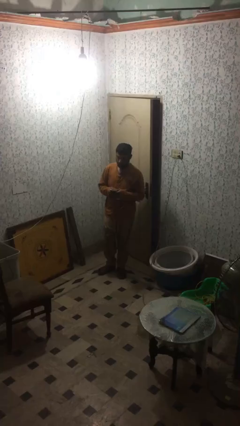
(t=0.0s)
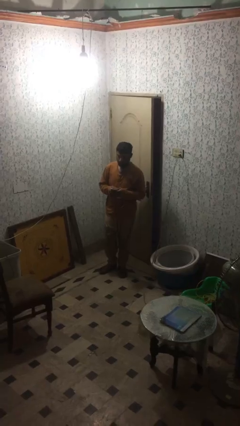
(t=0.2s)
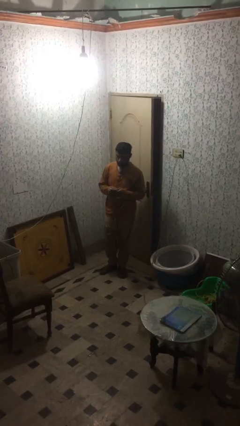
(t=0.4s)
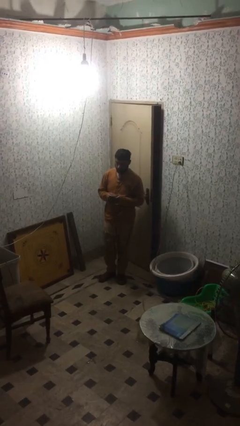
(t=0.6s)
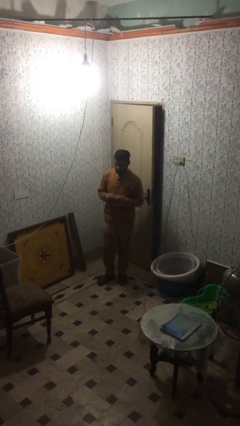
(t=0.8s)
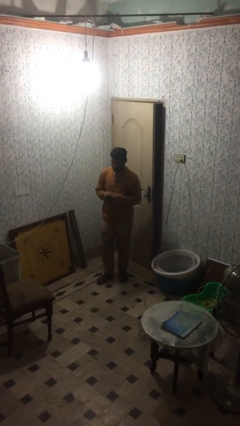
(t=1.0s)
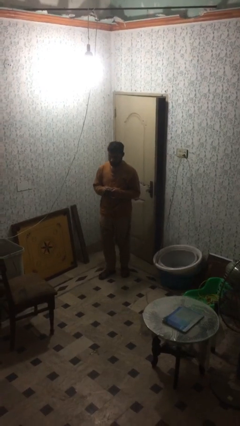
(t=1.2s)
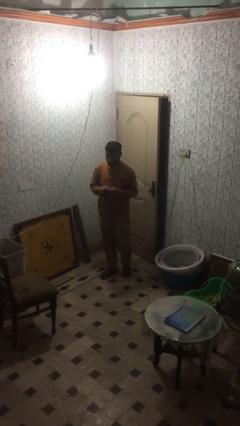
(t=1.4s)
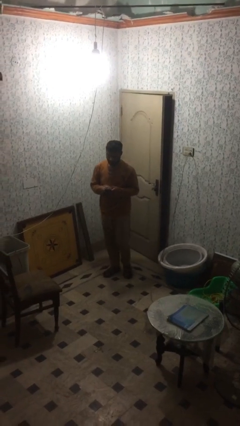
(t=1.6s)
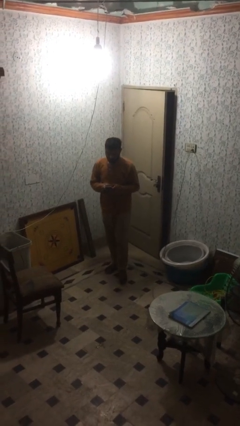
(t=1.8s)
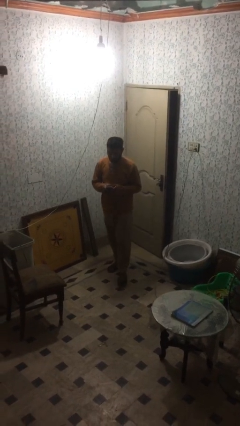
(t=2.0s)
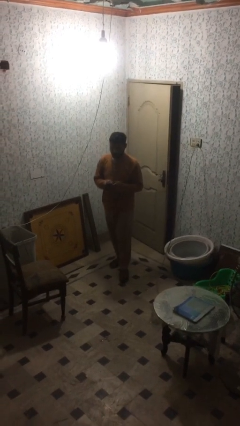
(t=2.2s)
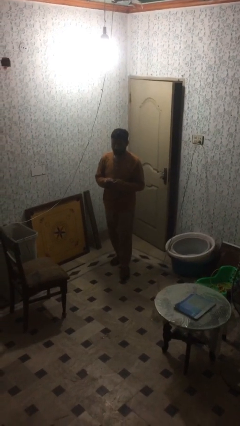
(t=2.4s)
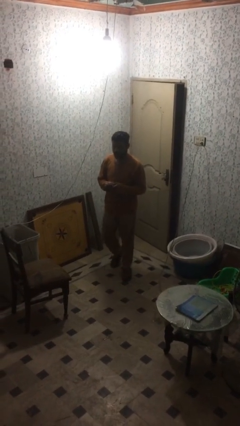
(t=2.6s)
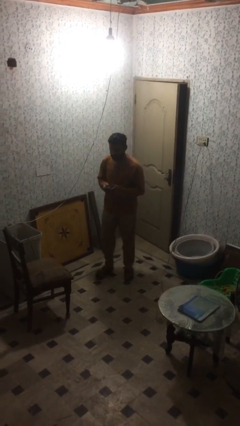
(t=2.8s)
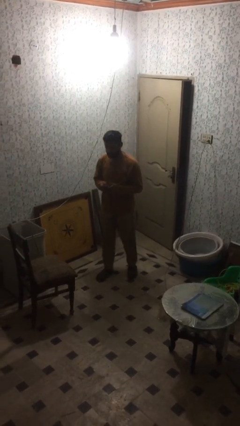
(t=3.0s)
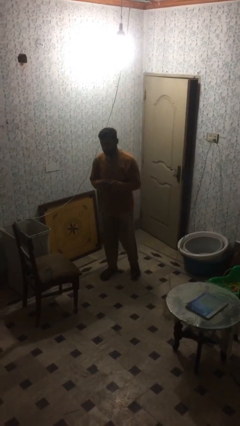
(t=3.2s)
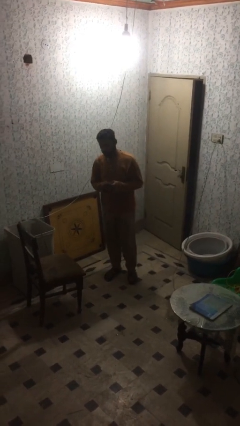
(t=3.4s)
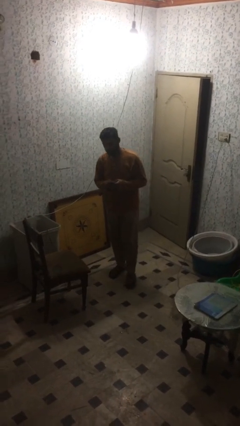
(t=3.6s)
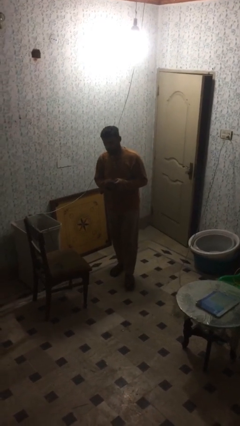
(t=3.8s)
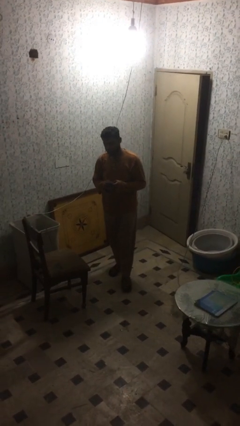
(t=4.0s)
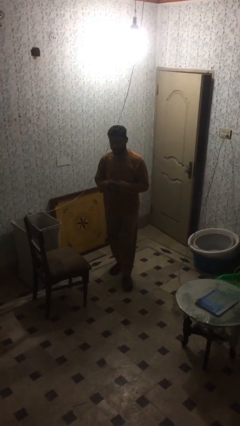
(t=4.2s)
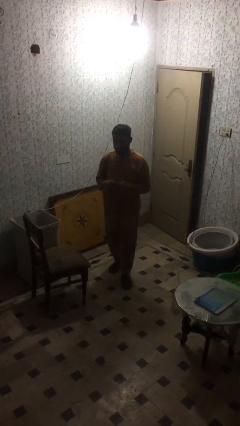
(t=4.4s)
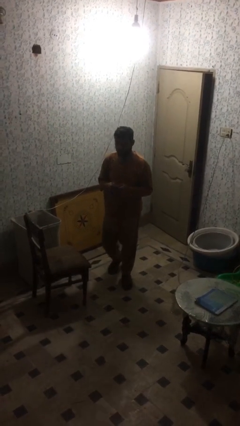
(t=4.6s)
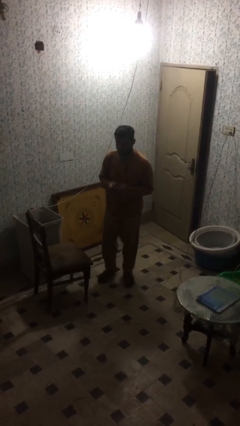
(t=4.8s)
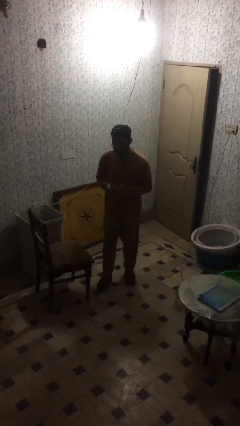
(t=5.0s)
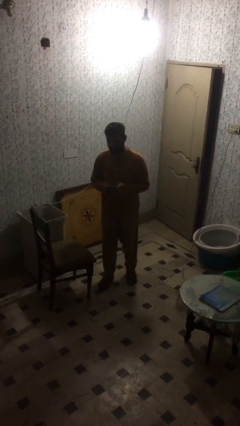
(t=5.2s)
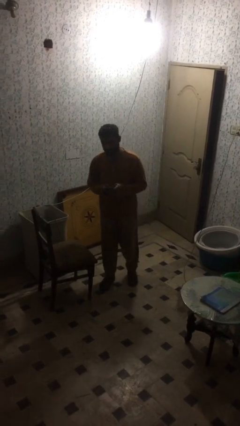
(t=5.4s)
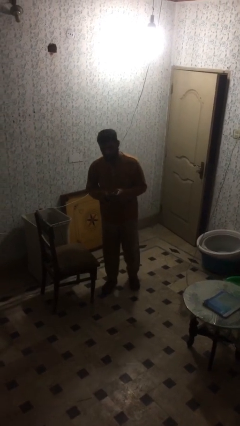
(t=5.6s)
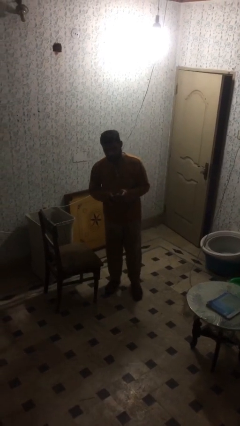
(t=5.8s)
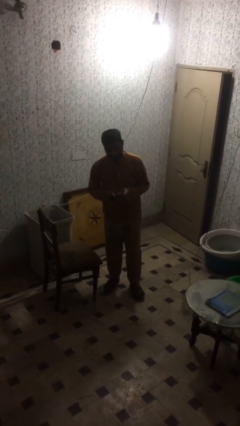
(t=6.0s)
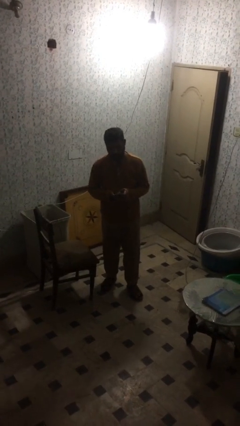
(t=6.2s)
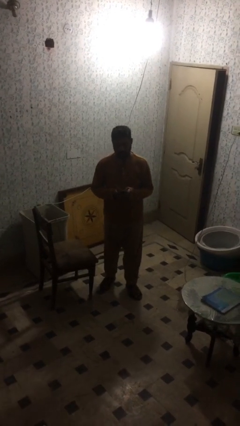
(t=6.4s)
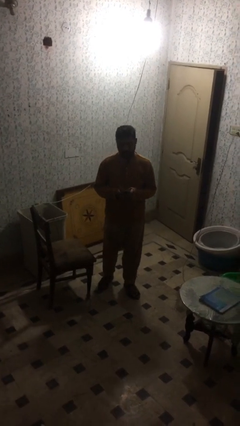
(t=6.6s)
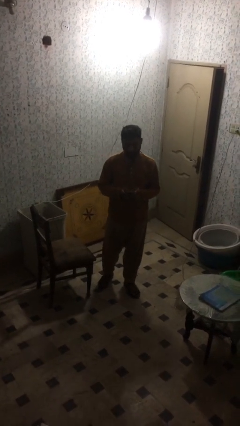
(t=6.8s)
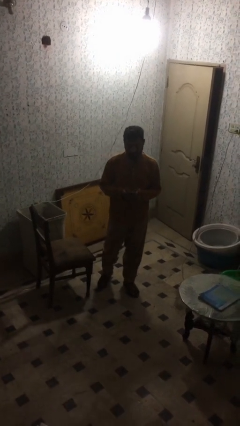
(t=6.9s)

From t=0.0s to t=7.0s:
person texts on phone

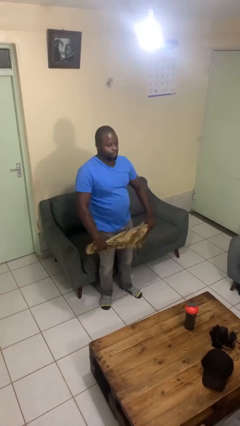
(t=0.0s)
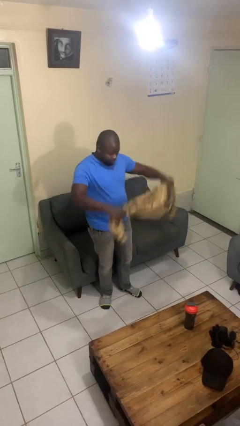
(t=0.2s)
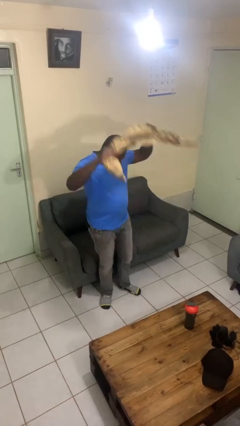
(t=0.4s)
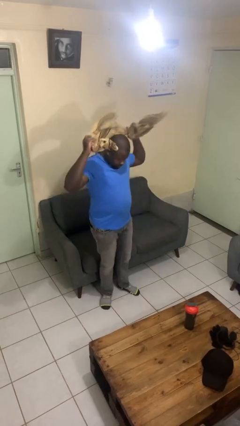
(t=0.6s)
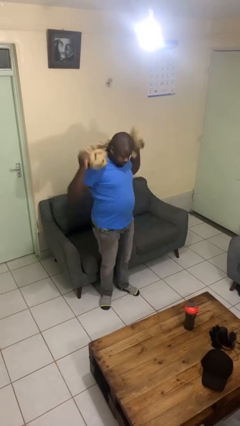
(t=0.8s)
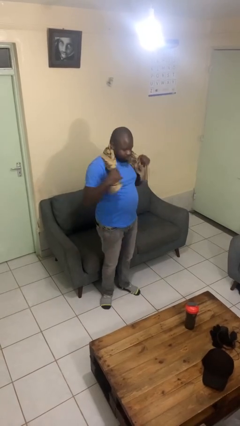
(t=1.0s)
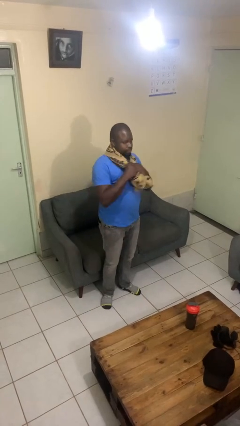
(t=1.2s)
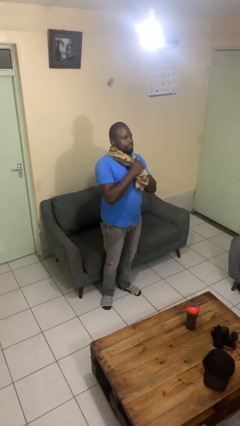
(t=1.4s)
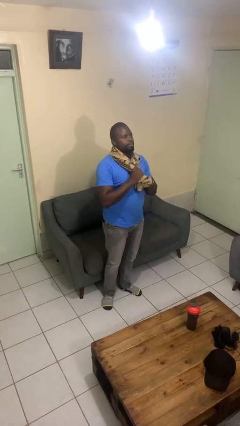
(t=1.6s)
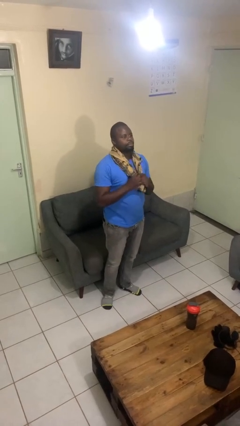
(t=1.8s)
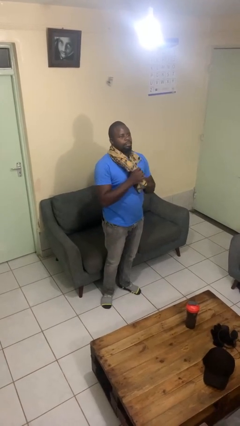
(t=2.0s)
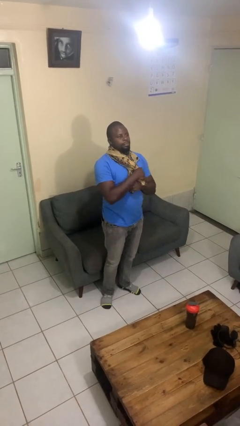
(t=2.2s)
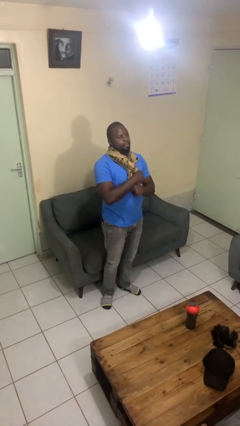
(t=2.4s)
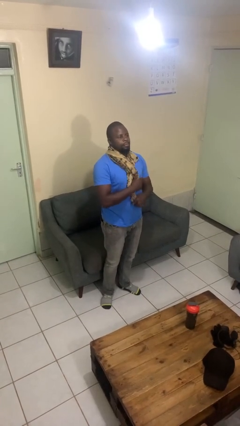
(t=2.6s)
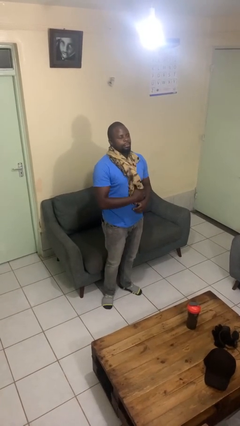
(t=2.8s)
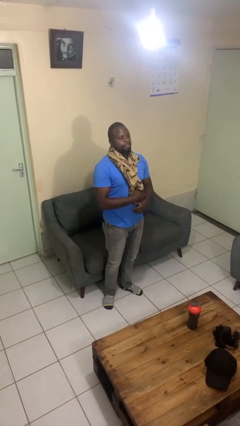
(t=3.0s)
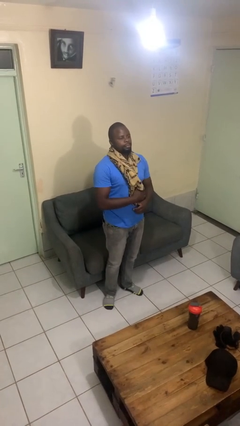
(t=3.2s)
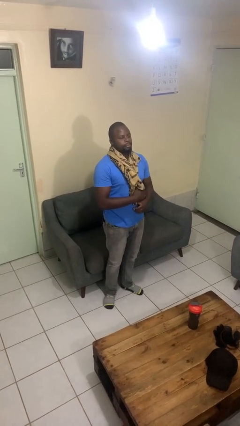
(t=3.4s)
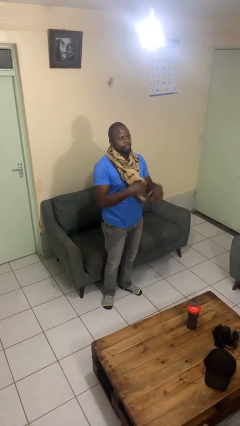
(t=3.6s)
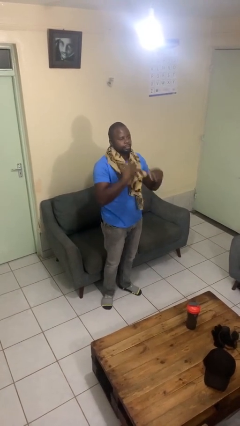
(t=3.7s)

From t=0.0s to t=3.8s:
person puts on scarf

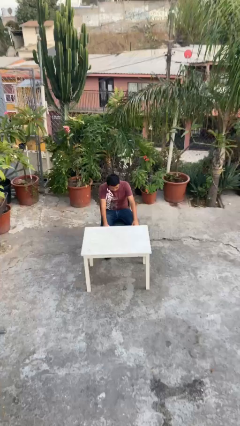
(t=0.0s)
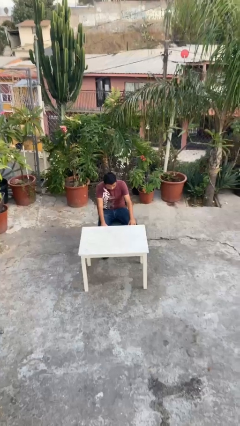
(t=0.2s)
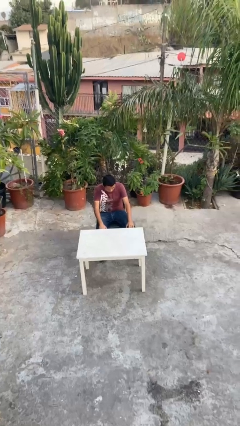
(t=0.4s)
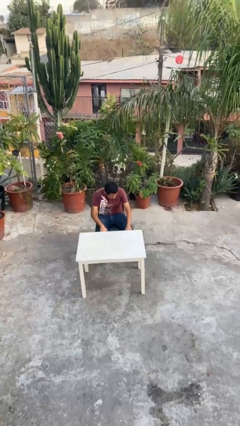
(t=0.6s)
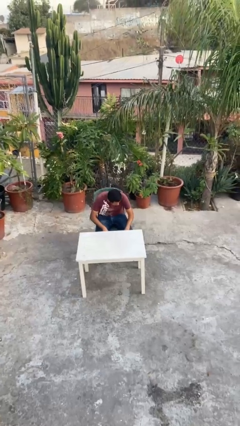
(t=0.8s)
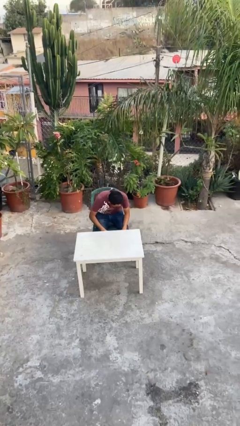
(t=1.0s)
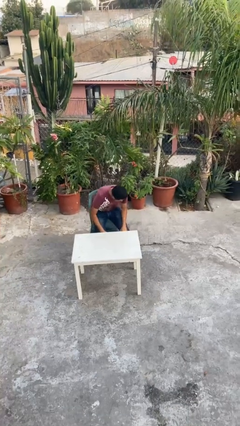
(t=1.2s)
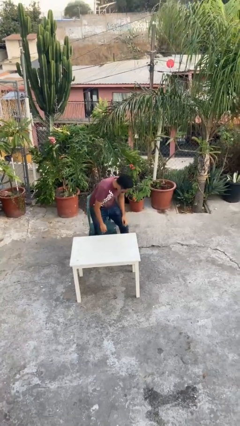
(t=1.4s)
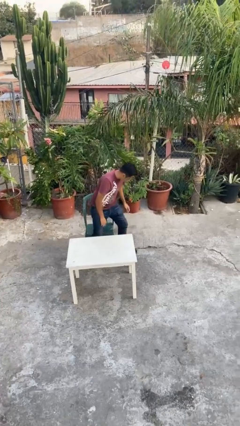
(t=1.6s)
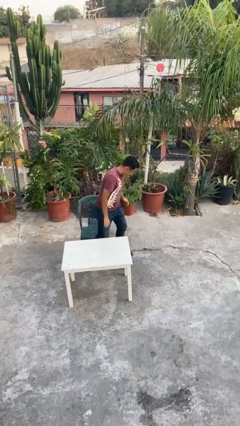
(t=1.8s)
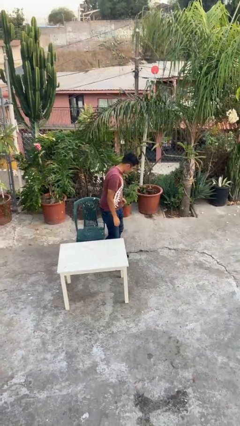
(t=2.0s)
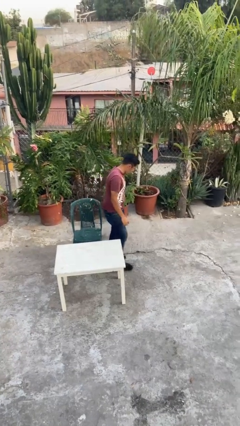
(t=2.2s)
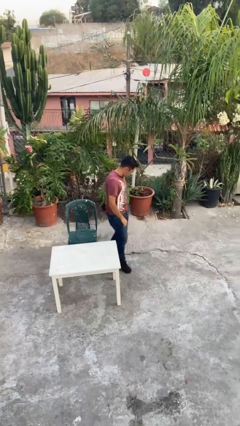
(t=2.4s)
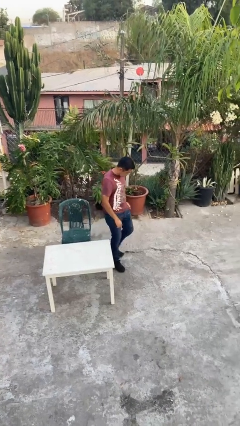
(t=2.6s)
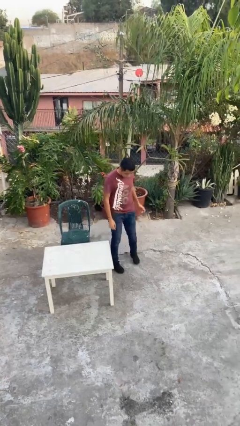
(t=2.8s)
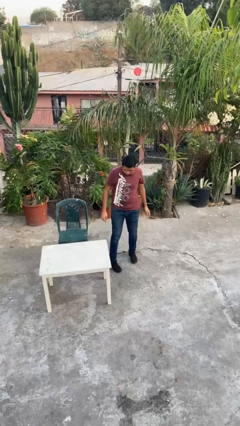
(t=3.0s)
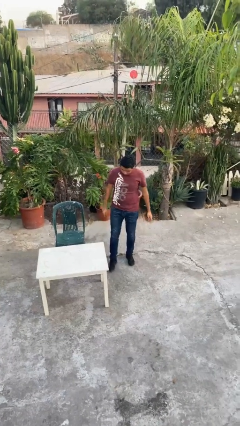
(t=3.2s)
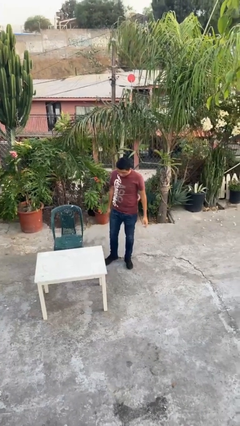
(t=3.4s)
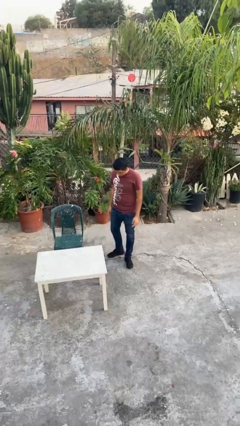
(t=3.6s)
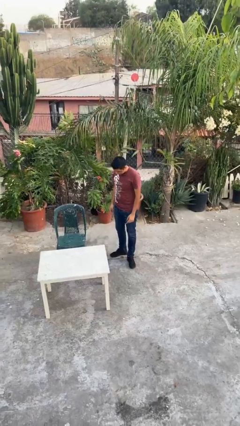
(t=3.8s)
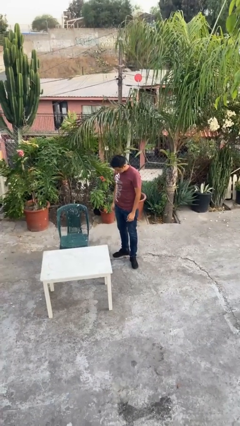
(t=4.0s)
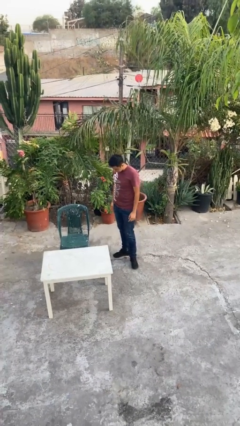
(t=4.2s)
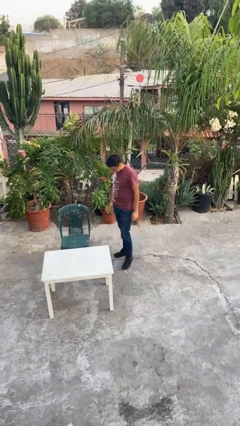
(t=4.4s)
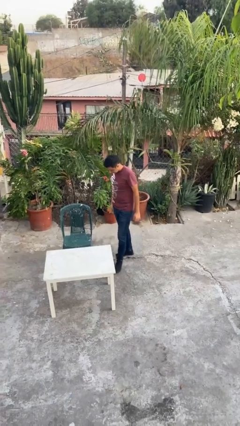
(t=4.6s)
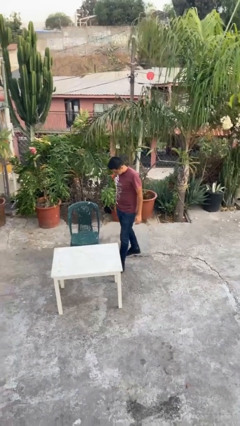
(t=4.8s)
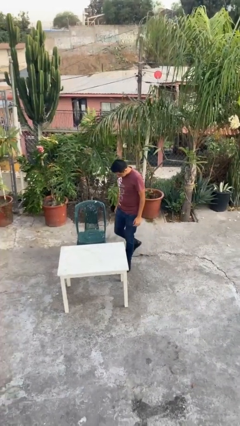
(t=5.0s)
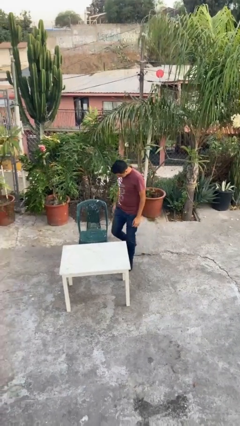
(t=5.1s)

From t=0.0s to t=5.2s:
person stands up

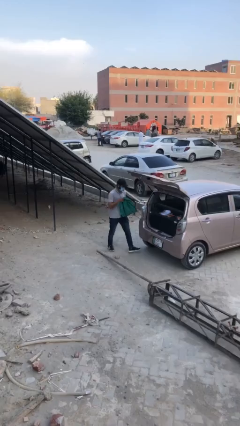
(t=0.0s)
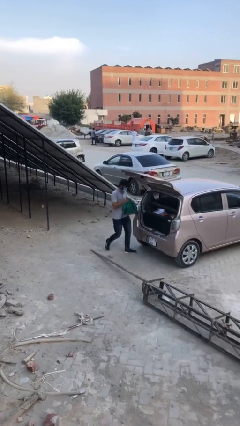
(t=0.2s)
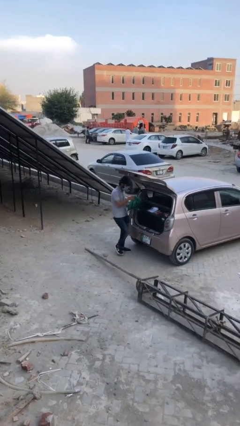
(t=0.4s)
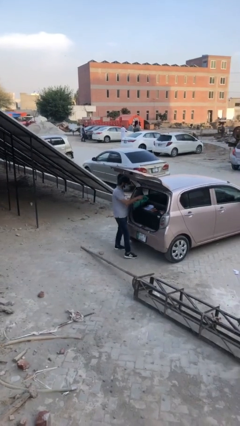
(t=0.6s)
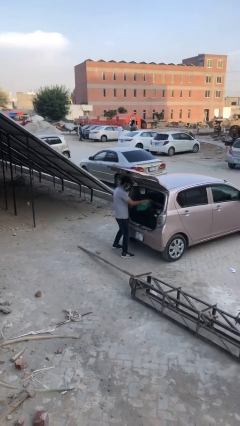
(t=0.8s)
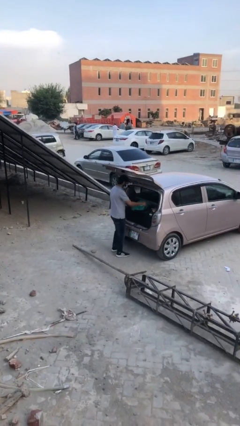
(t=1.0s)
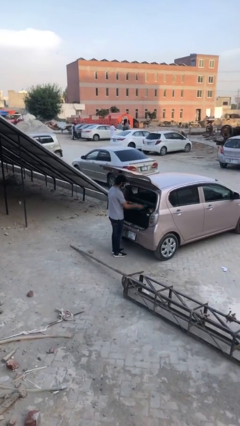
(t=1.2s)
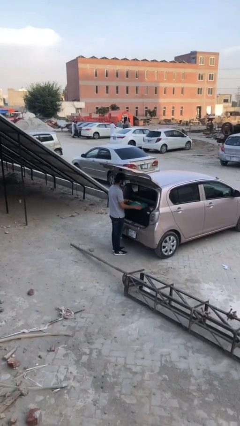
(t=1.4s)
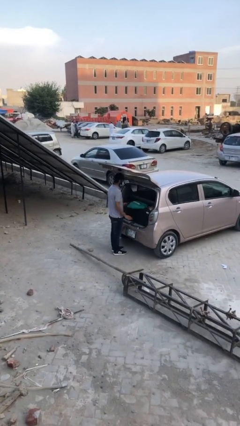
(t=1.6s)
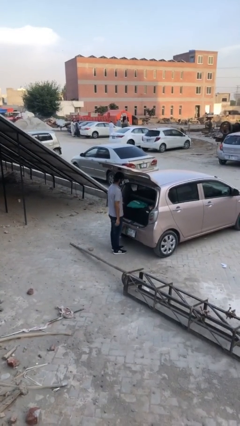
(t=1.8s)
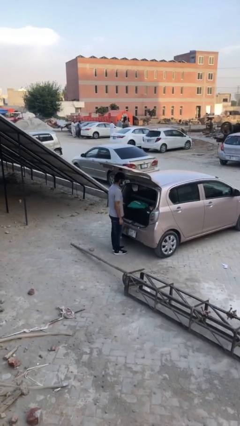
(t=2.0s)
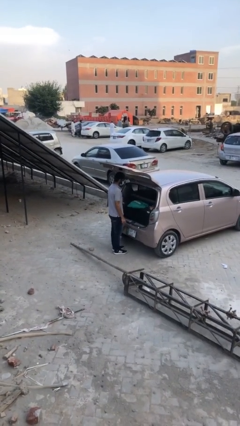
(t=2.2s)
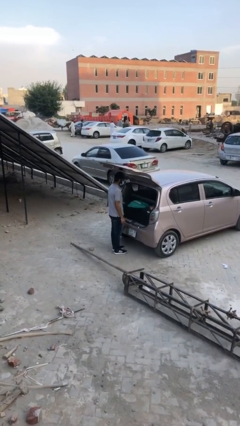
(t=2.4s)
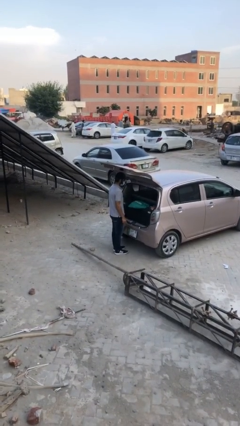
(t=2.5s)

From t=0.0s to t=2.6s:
person loads car
